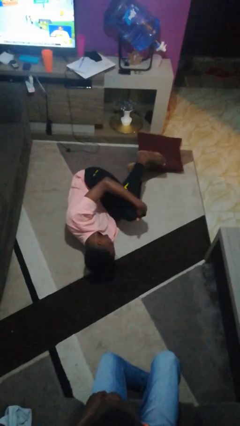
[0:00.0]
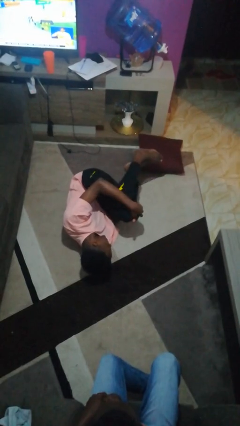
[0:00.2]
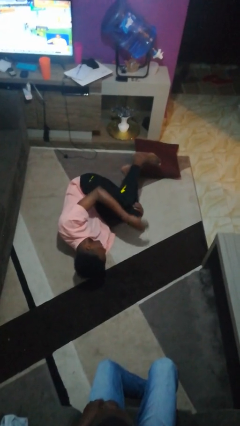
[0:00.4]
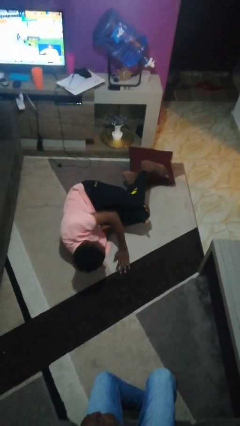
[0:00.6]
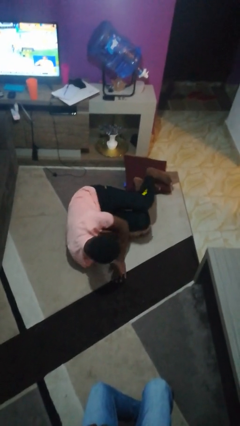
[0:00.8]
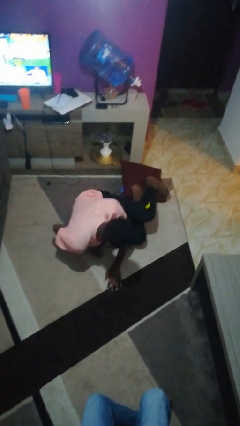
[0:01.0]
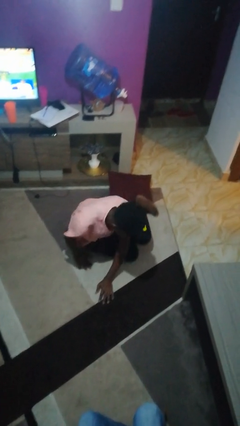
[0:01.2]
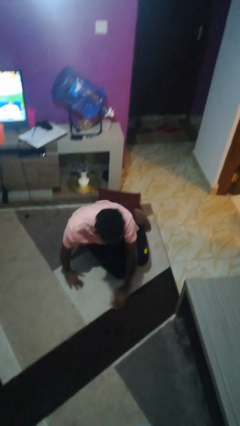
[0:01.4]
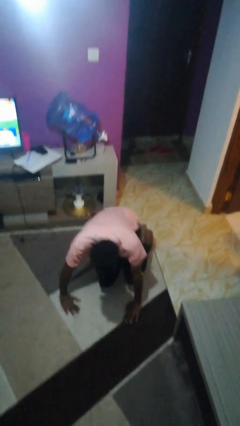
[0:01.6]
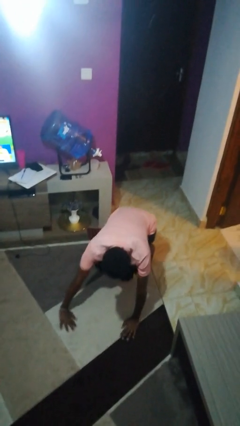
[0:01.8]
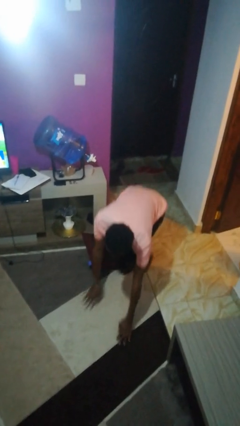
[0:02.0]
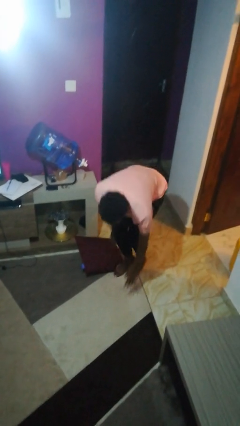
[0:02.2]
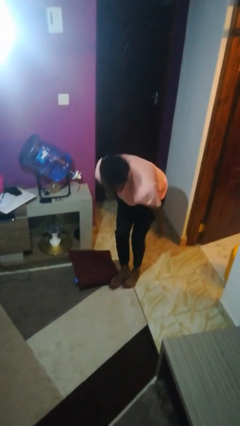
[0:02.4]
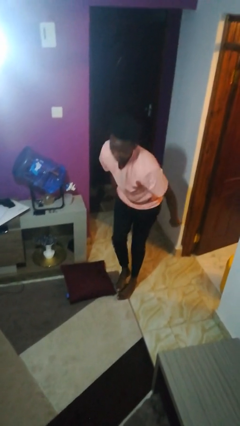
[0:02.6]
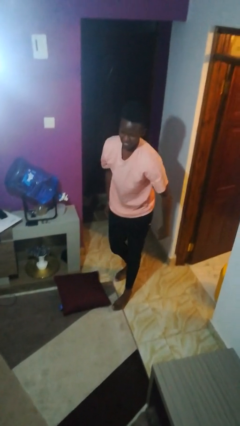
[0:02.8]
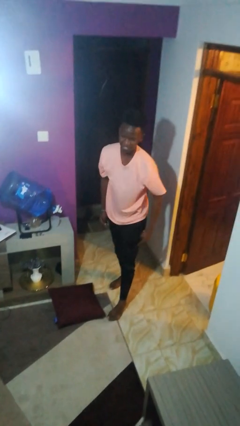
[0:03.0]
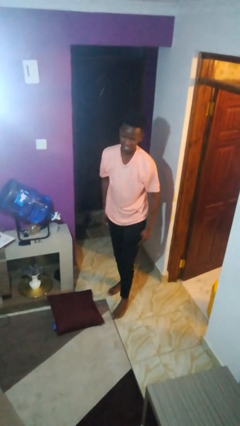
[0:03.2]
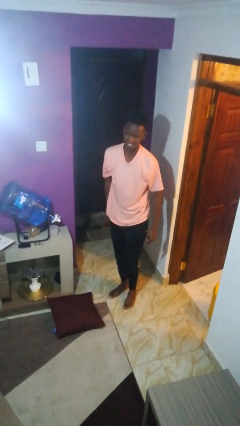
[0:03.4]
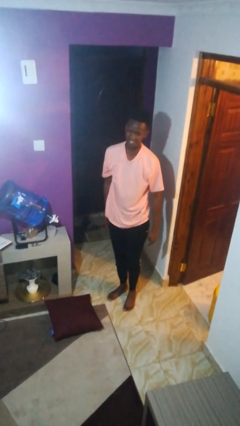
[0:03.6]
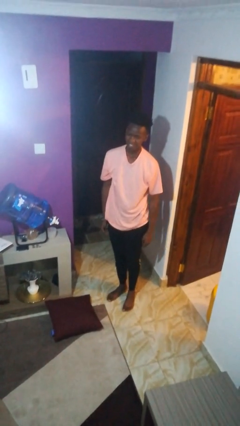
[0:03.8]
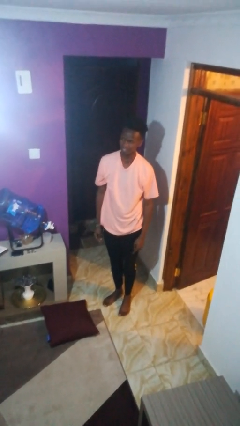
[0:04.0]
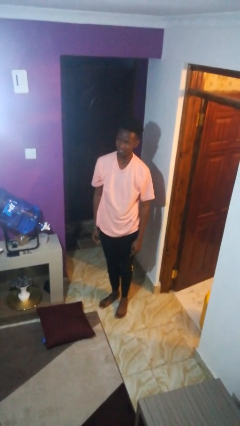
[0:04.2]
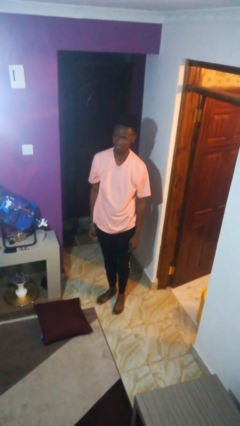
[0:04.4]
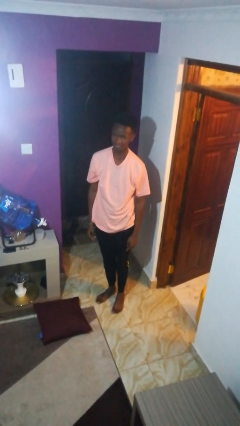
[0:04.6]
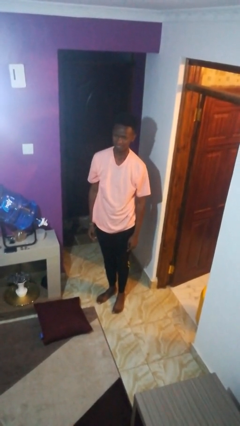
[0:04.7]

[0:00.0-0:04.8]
person stands up from floor

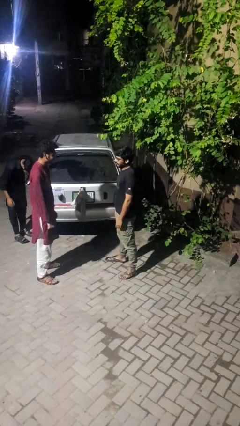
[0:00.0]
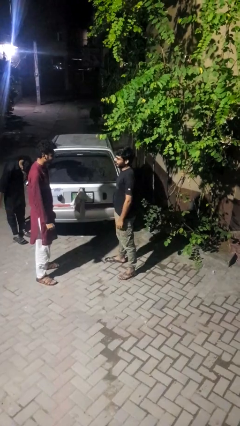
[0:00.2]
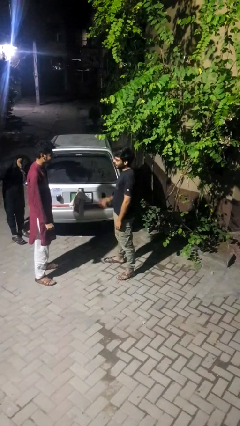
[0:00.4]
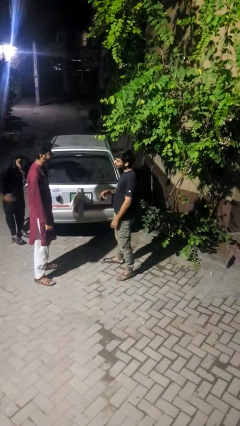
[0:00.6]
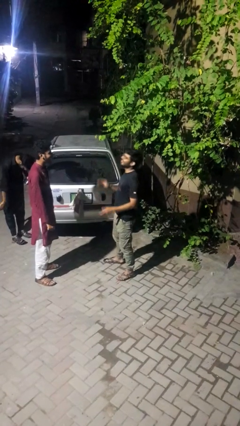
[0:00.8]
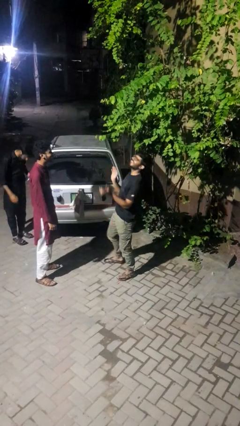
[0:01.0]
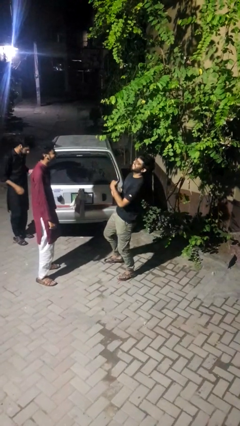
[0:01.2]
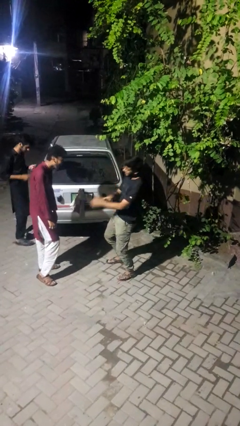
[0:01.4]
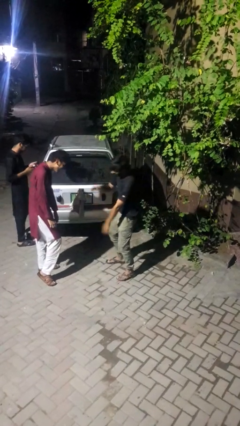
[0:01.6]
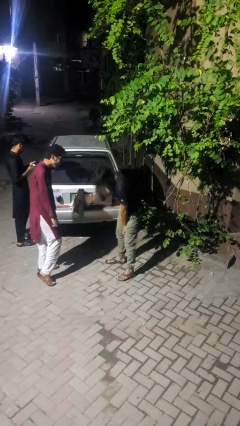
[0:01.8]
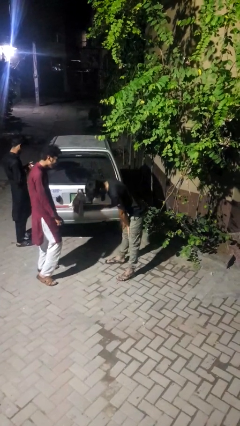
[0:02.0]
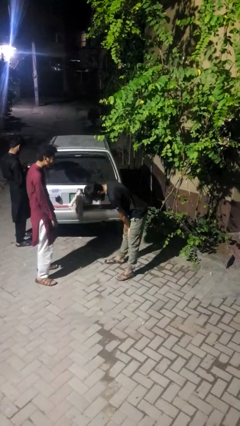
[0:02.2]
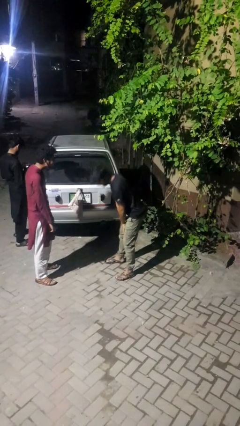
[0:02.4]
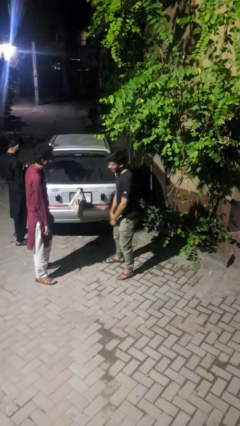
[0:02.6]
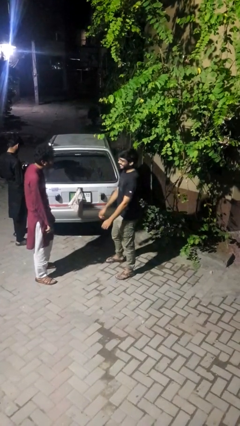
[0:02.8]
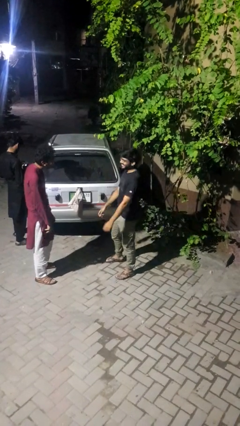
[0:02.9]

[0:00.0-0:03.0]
person laughs with person

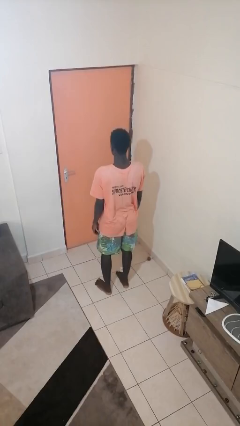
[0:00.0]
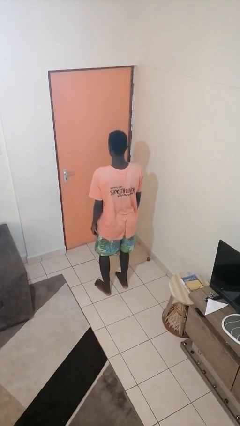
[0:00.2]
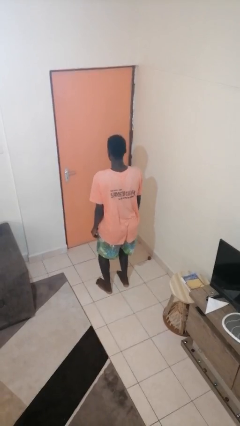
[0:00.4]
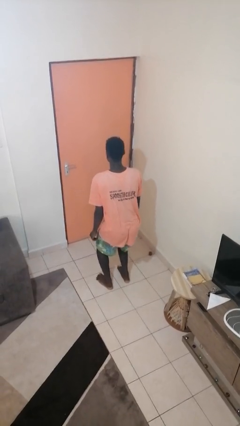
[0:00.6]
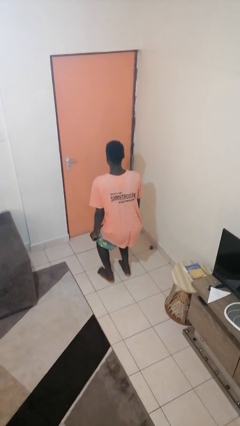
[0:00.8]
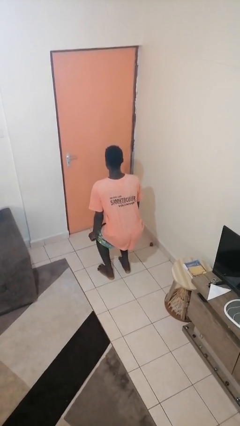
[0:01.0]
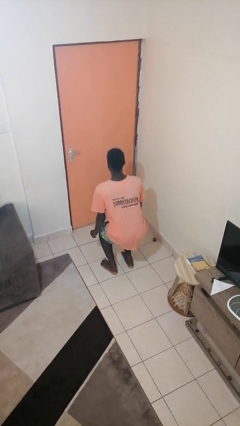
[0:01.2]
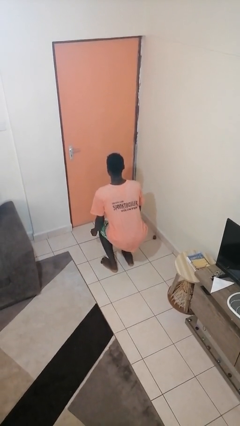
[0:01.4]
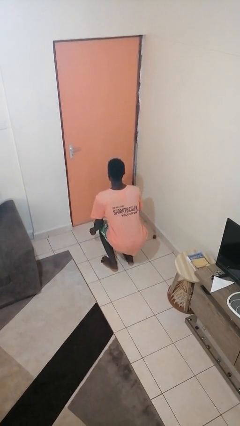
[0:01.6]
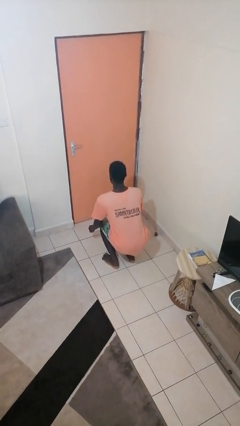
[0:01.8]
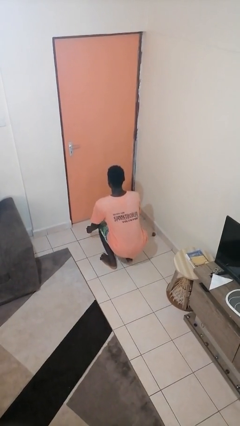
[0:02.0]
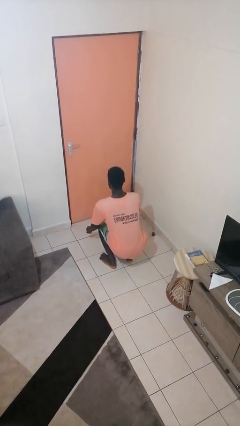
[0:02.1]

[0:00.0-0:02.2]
person squats

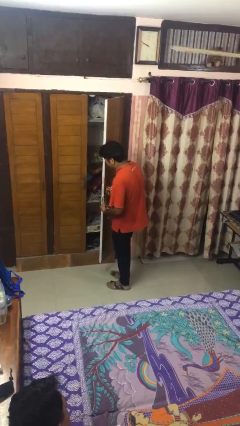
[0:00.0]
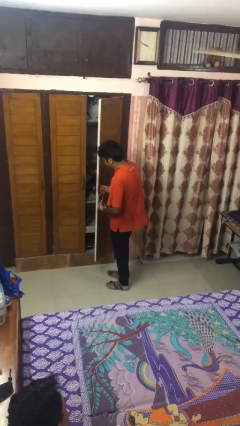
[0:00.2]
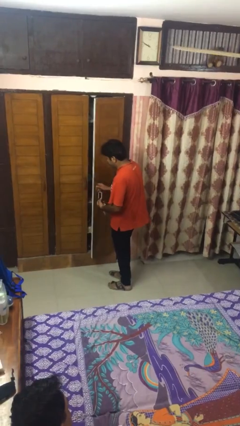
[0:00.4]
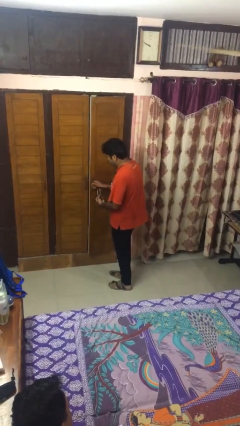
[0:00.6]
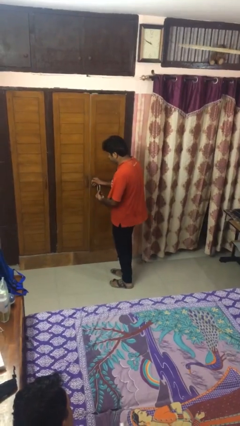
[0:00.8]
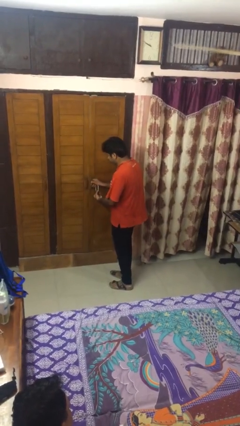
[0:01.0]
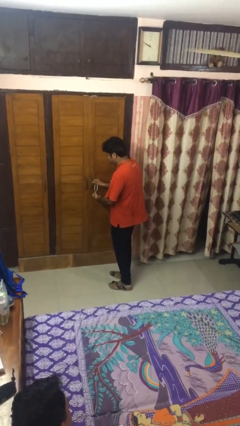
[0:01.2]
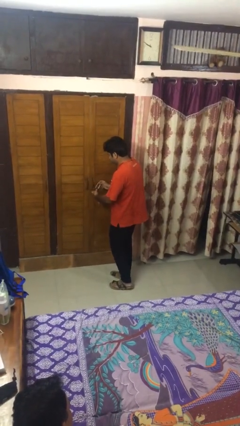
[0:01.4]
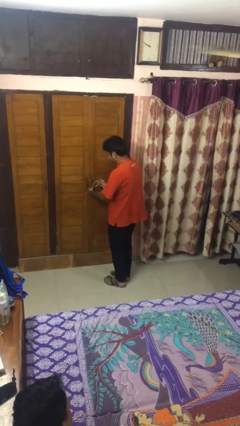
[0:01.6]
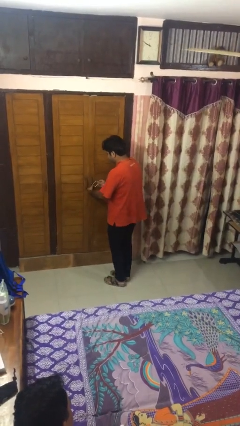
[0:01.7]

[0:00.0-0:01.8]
person closes facility door

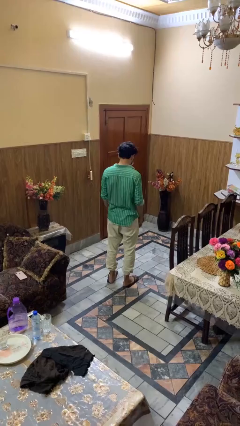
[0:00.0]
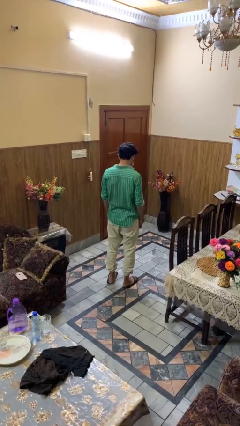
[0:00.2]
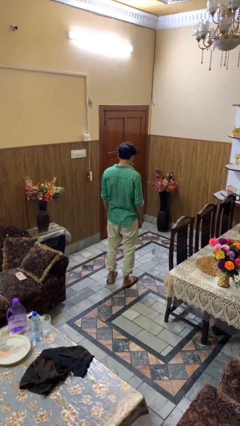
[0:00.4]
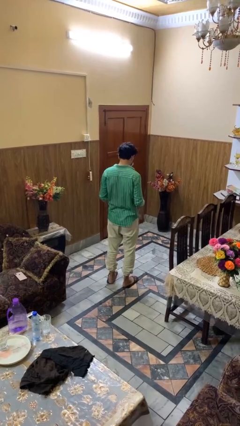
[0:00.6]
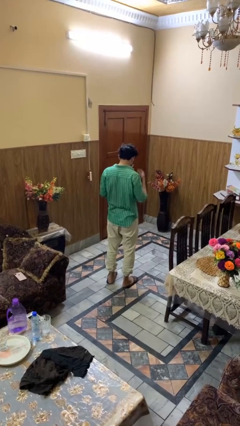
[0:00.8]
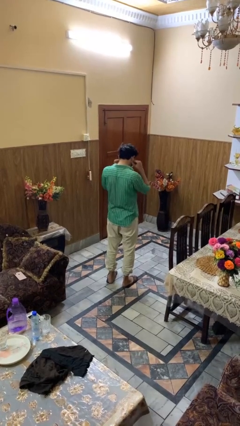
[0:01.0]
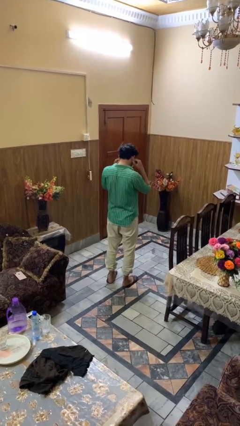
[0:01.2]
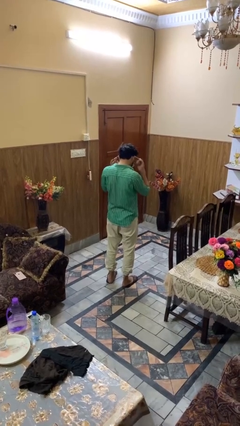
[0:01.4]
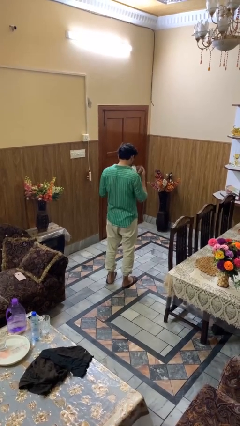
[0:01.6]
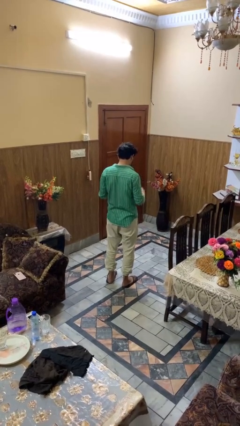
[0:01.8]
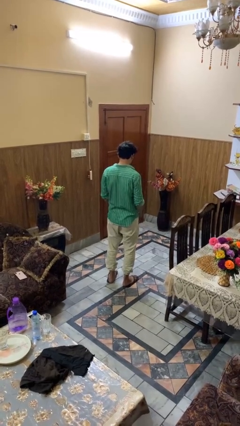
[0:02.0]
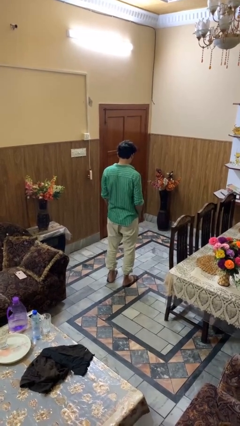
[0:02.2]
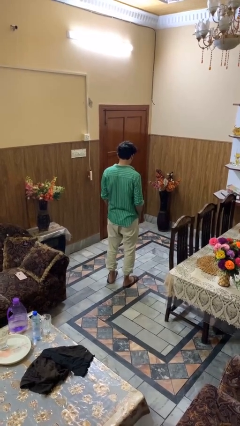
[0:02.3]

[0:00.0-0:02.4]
person takes off facemask

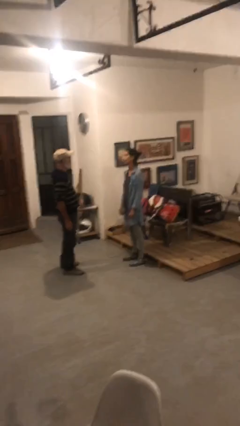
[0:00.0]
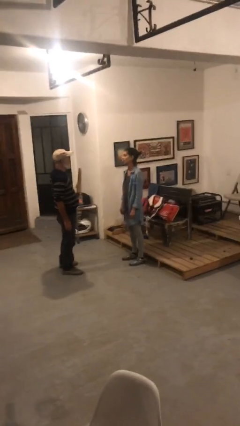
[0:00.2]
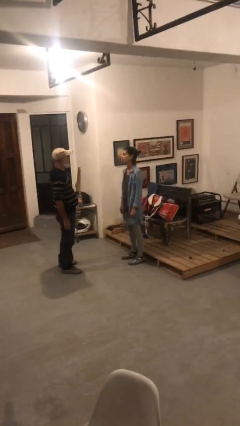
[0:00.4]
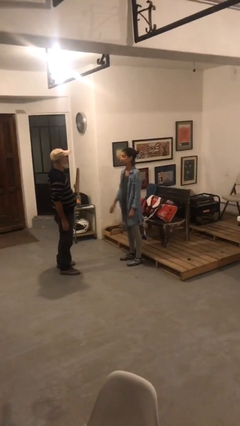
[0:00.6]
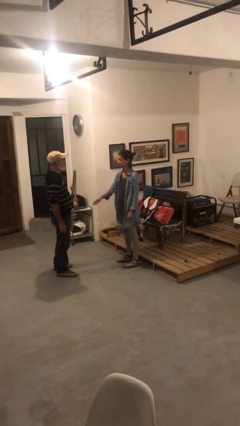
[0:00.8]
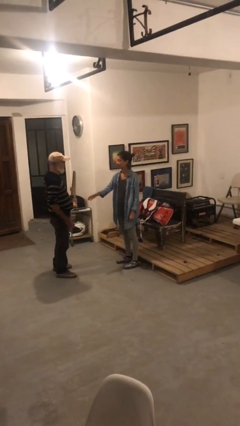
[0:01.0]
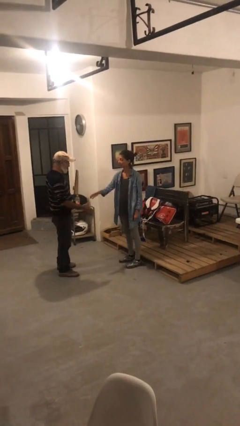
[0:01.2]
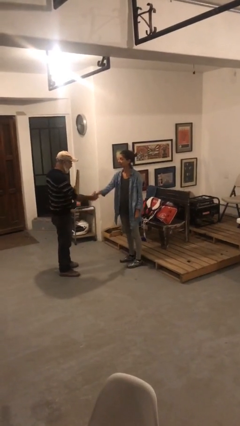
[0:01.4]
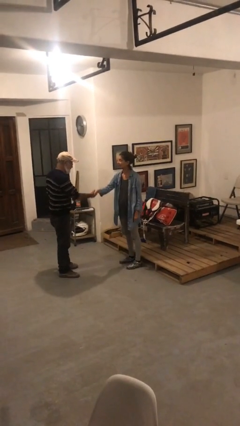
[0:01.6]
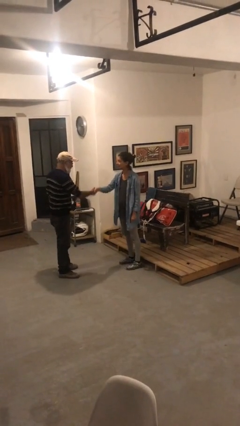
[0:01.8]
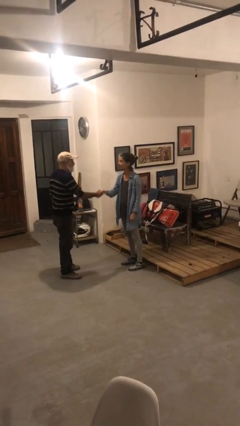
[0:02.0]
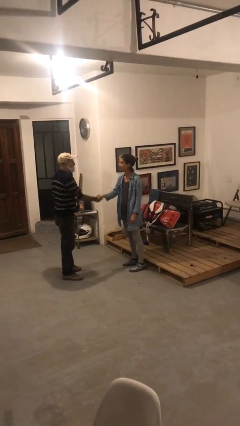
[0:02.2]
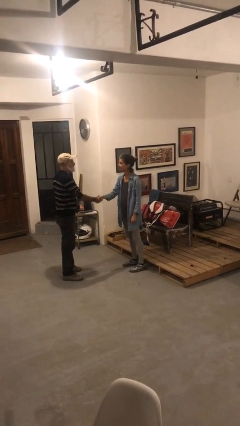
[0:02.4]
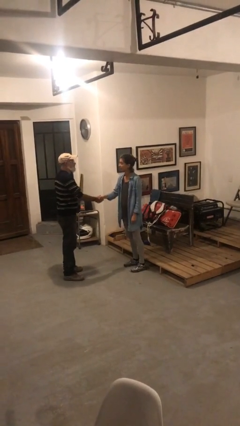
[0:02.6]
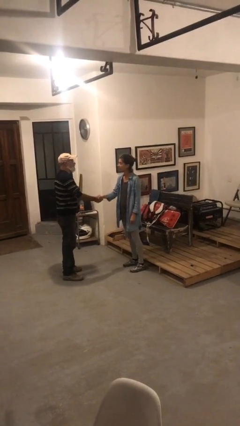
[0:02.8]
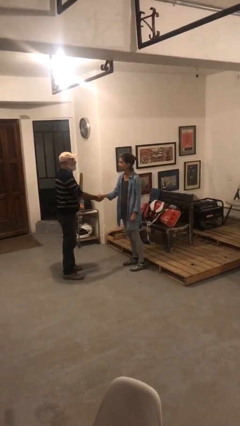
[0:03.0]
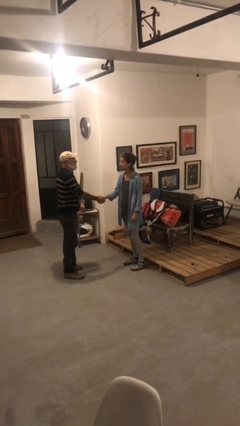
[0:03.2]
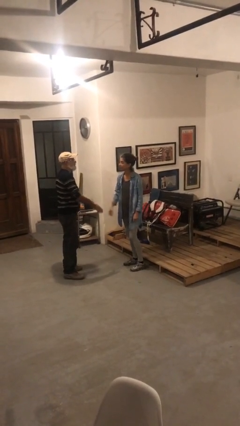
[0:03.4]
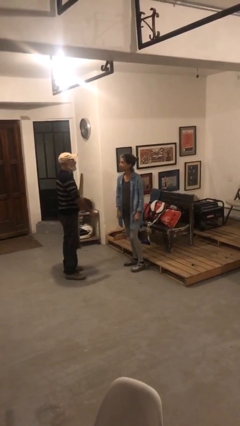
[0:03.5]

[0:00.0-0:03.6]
person shakes hand
